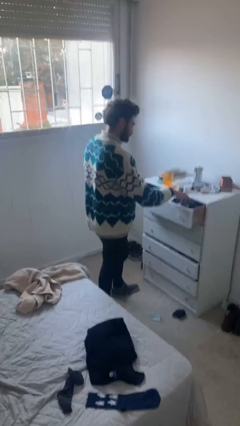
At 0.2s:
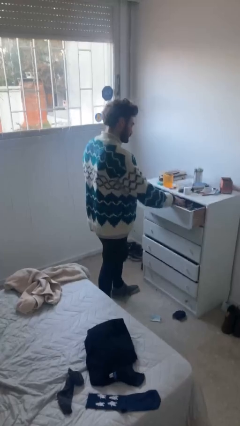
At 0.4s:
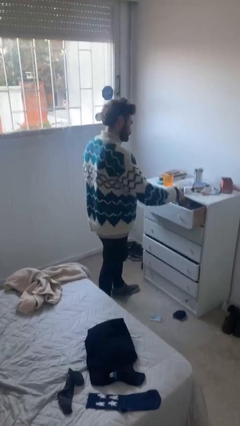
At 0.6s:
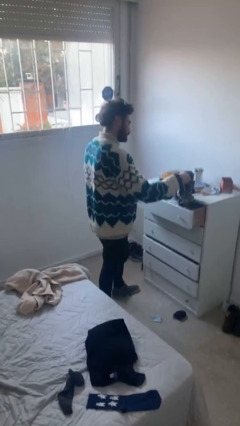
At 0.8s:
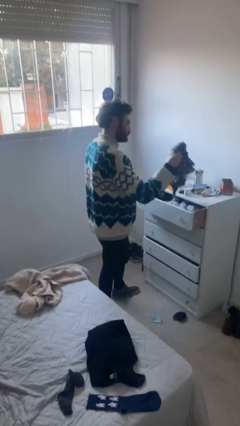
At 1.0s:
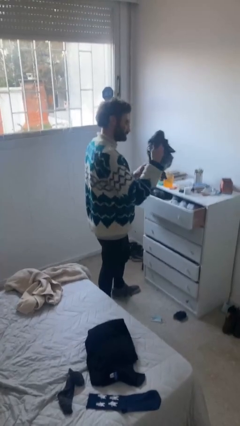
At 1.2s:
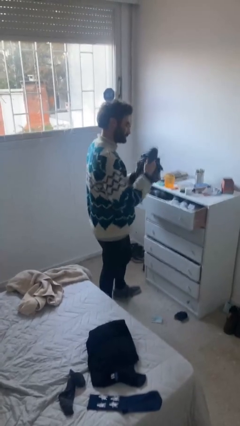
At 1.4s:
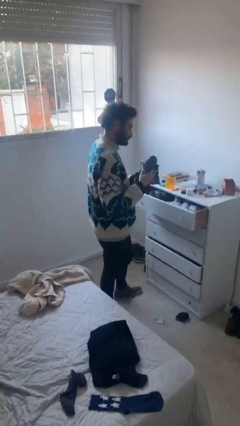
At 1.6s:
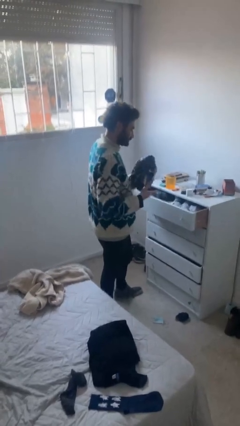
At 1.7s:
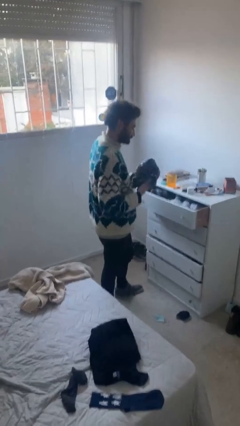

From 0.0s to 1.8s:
person takes clothes from dresser

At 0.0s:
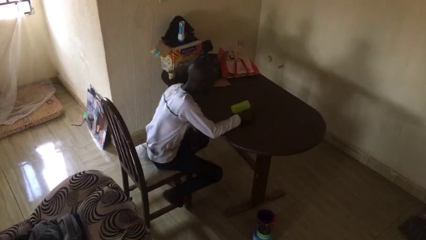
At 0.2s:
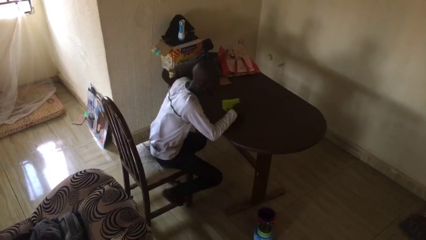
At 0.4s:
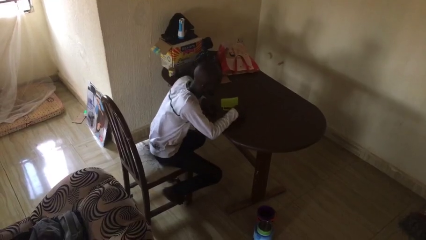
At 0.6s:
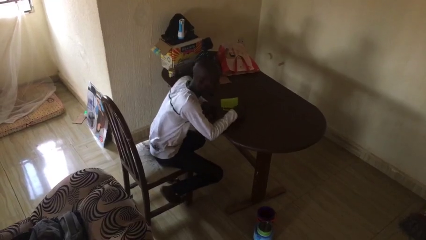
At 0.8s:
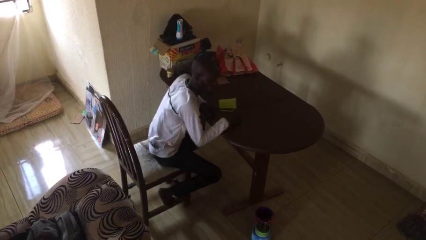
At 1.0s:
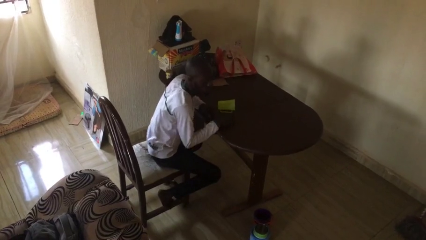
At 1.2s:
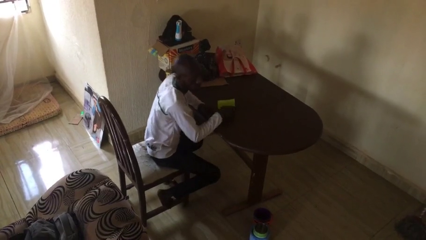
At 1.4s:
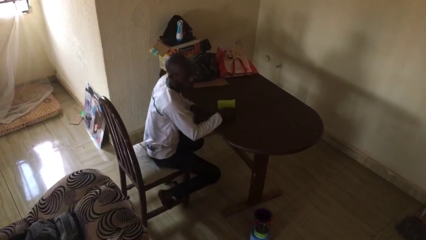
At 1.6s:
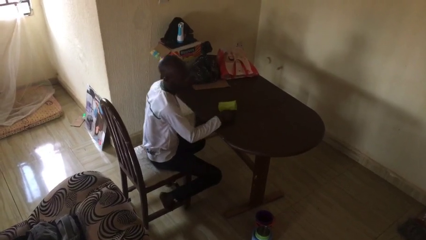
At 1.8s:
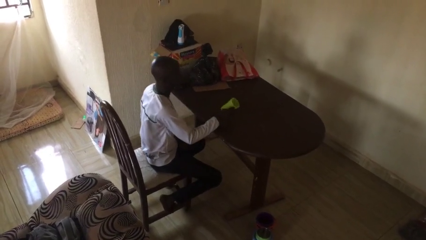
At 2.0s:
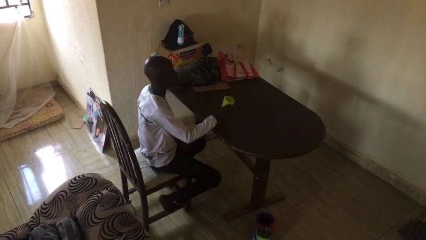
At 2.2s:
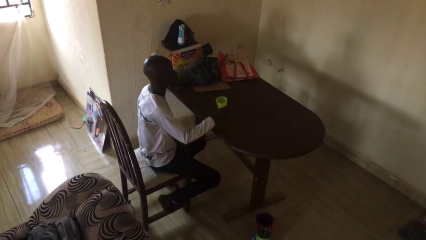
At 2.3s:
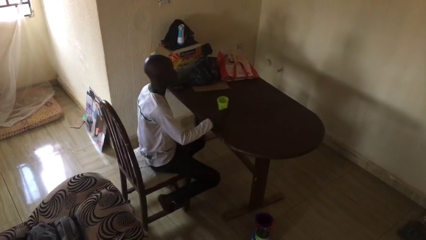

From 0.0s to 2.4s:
person sets upright glass

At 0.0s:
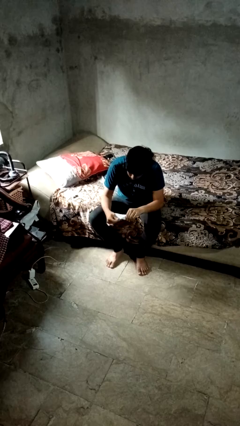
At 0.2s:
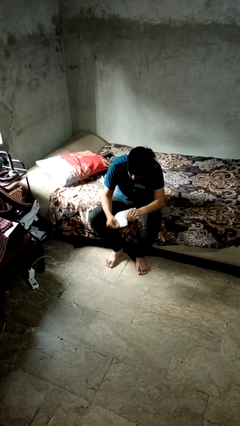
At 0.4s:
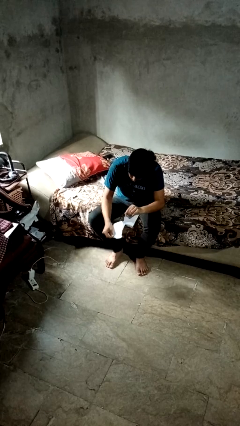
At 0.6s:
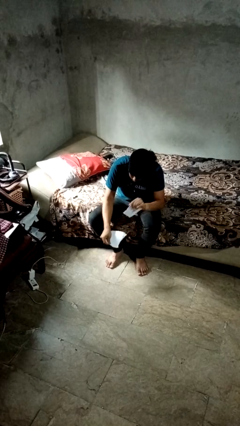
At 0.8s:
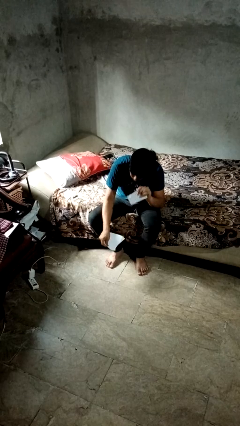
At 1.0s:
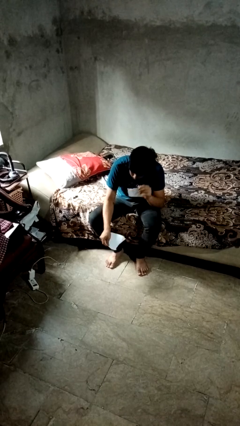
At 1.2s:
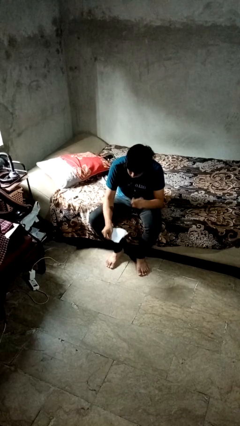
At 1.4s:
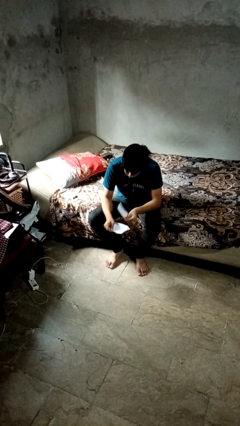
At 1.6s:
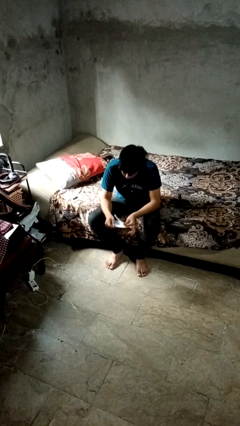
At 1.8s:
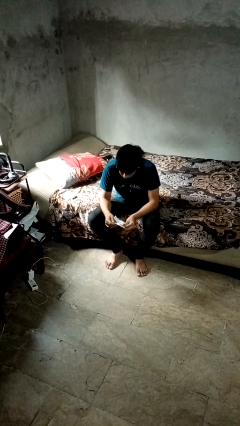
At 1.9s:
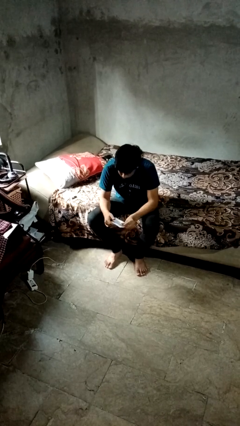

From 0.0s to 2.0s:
person tears paper

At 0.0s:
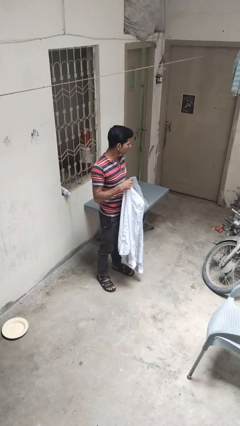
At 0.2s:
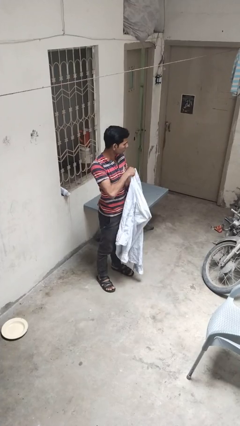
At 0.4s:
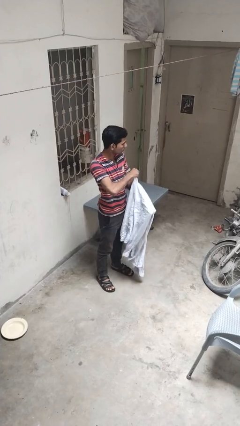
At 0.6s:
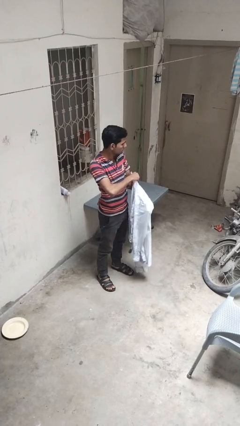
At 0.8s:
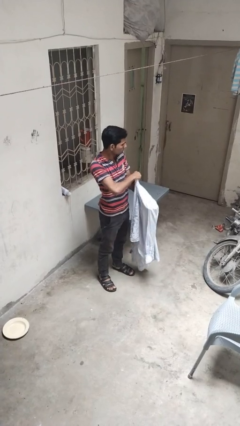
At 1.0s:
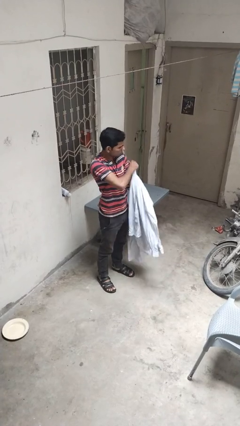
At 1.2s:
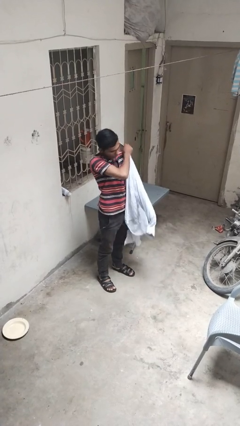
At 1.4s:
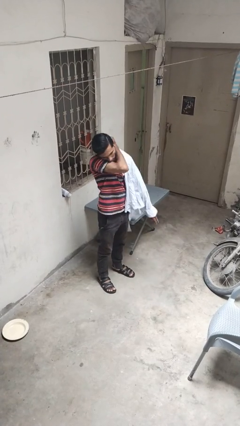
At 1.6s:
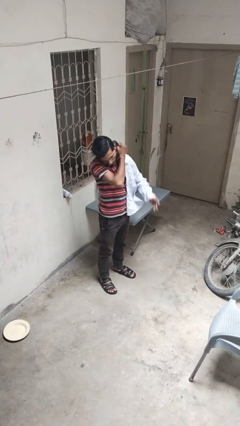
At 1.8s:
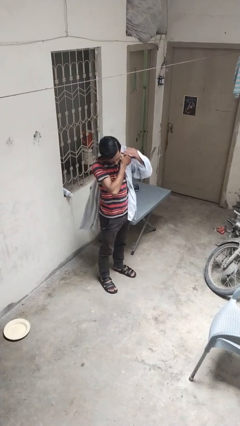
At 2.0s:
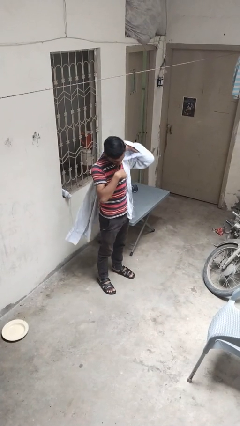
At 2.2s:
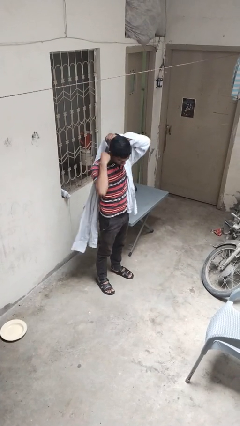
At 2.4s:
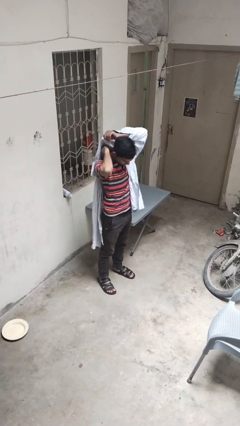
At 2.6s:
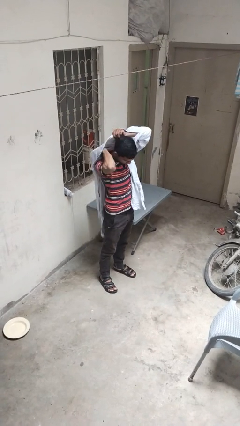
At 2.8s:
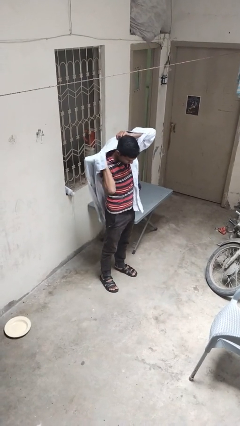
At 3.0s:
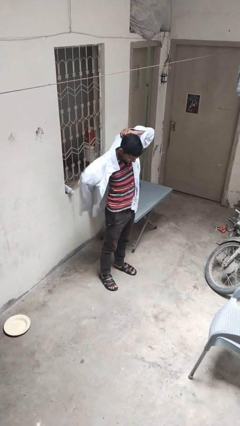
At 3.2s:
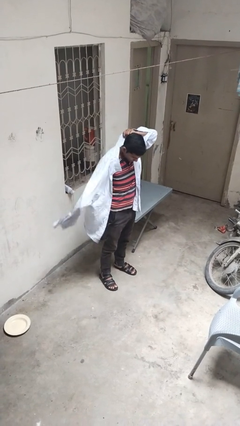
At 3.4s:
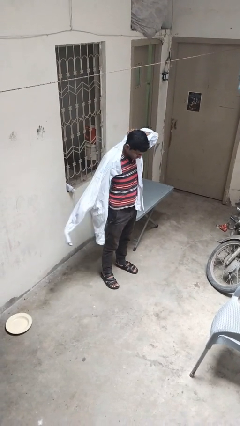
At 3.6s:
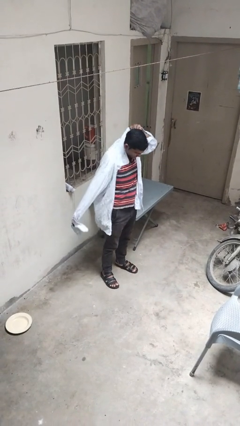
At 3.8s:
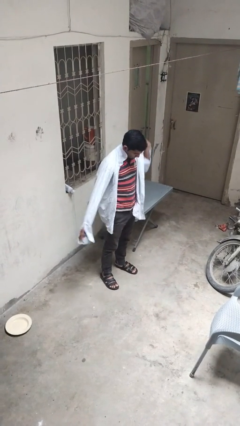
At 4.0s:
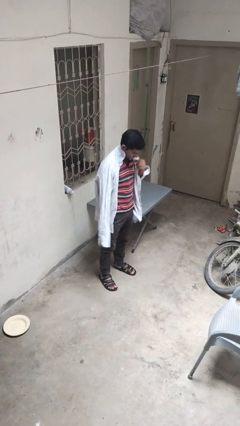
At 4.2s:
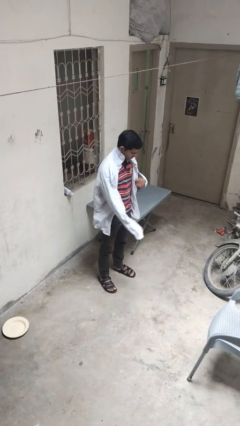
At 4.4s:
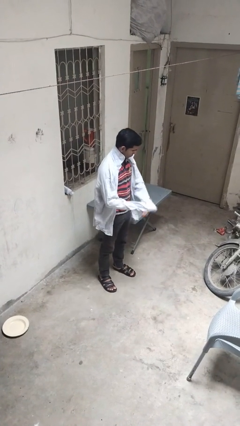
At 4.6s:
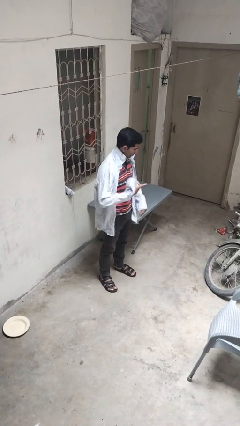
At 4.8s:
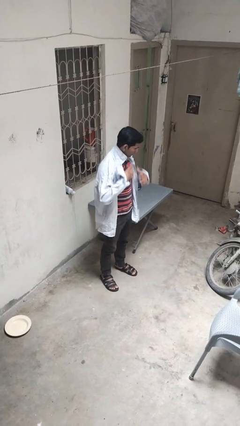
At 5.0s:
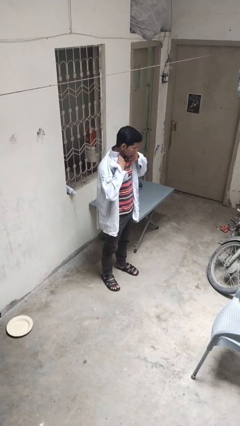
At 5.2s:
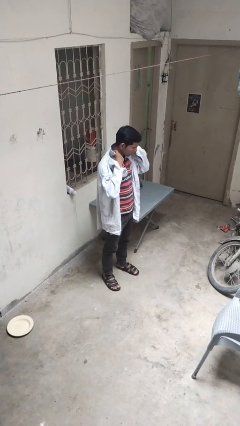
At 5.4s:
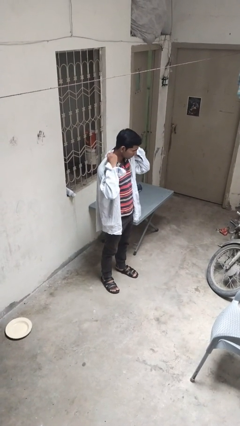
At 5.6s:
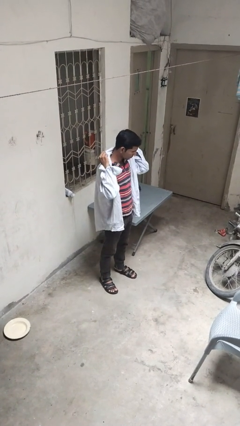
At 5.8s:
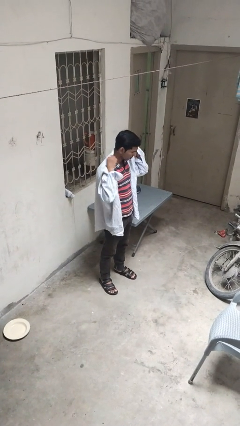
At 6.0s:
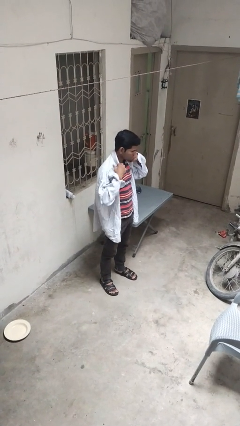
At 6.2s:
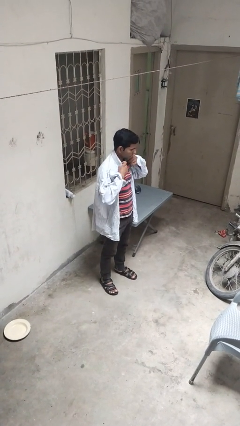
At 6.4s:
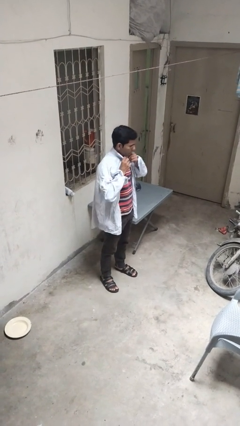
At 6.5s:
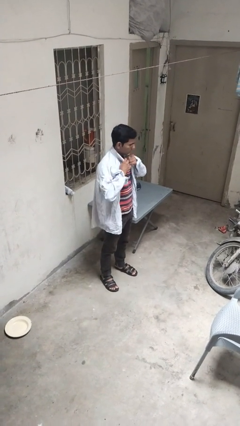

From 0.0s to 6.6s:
person puts on shirt

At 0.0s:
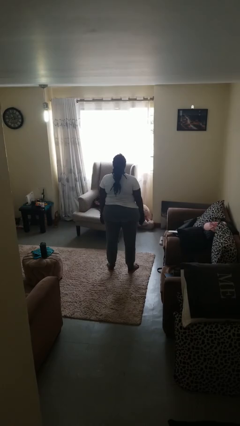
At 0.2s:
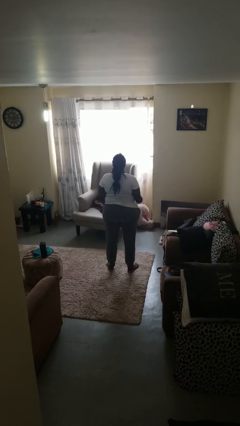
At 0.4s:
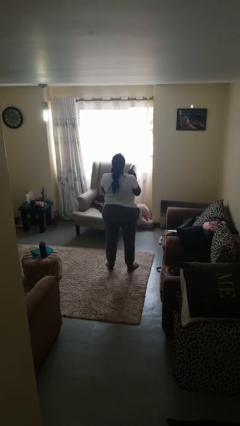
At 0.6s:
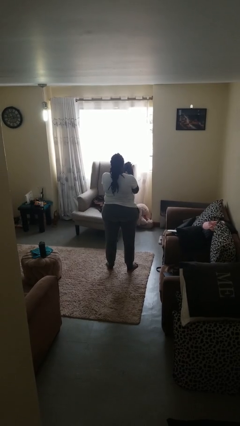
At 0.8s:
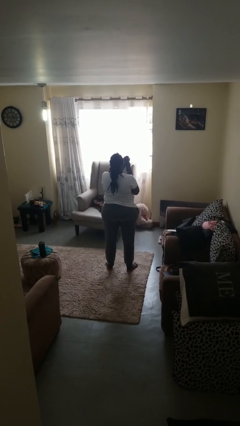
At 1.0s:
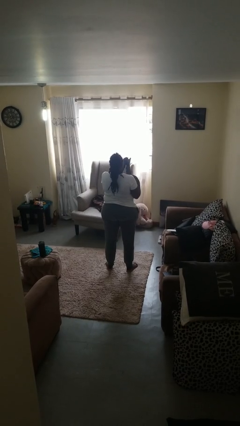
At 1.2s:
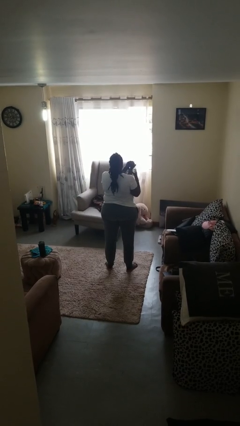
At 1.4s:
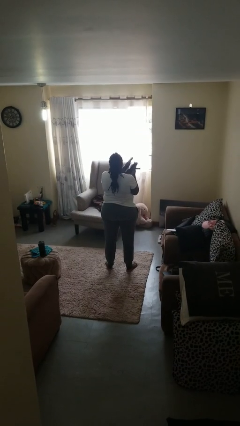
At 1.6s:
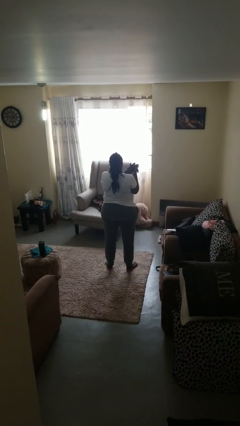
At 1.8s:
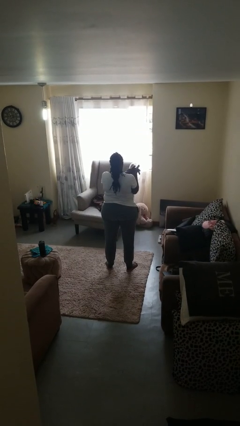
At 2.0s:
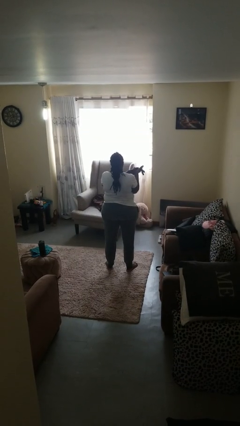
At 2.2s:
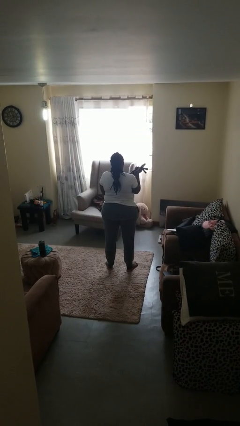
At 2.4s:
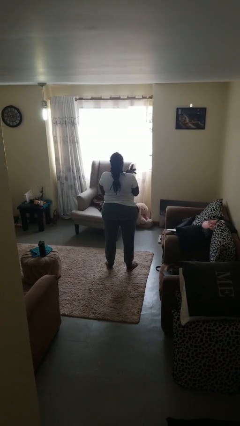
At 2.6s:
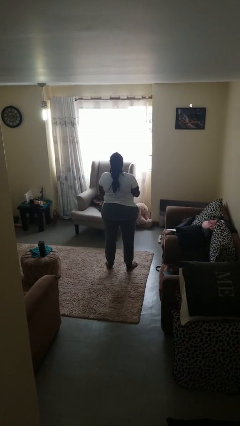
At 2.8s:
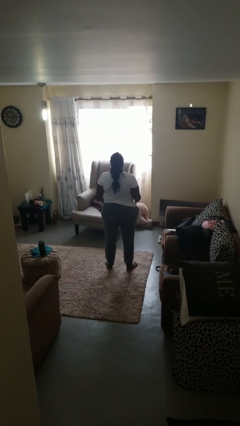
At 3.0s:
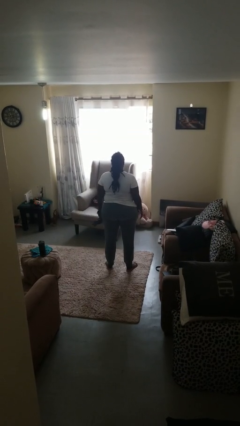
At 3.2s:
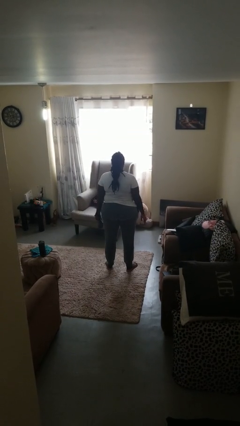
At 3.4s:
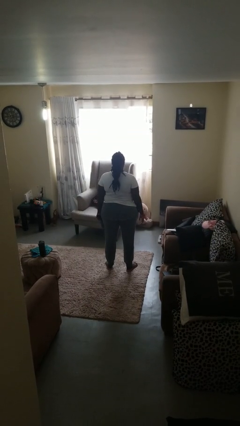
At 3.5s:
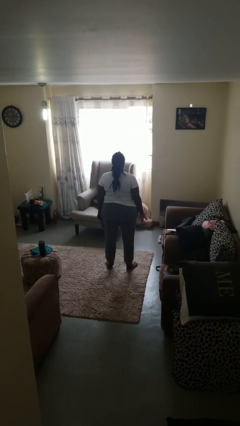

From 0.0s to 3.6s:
person takes off gloves

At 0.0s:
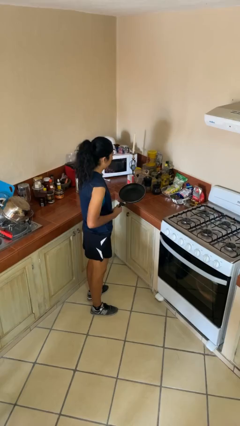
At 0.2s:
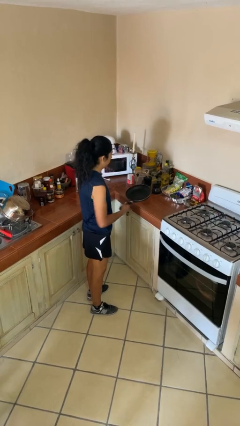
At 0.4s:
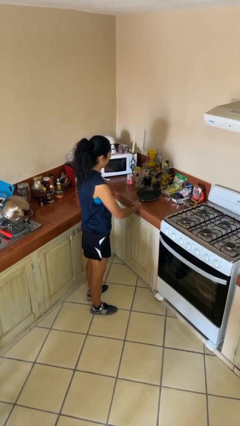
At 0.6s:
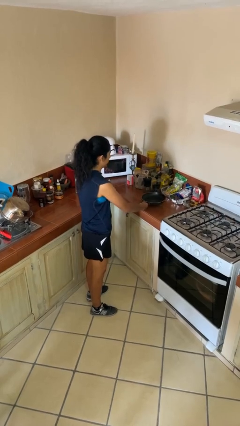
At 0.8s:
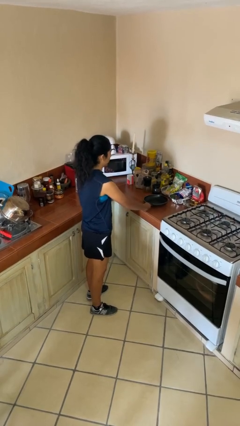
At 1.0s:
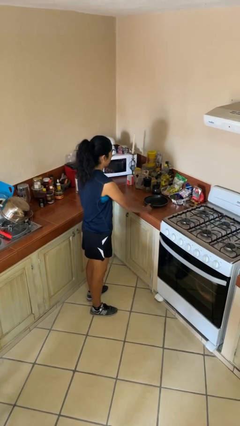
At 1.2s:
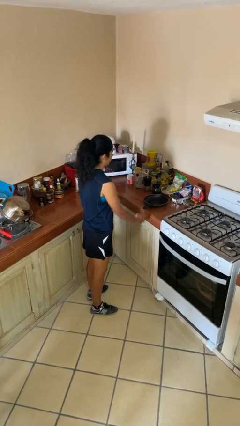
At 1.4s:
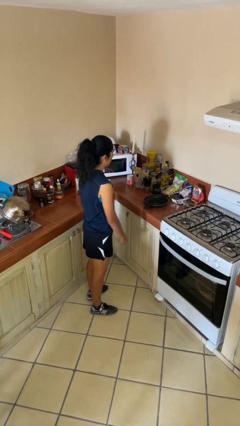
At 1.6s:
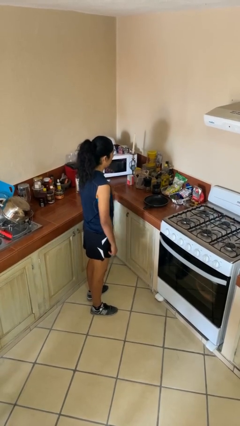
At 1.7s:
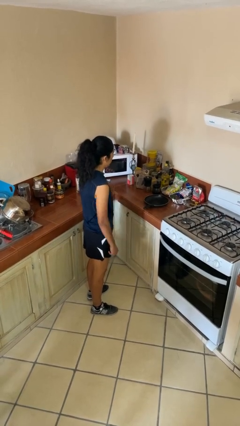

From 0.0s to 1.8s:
person puts down object on countertop
